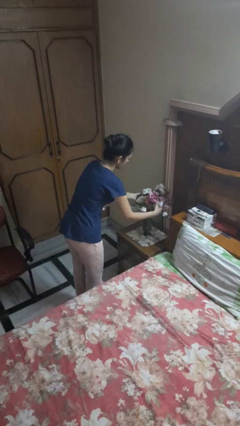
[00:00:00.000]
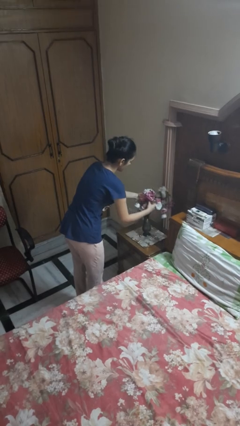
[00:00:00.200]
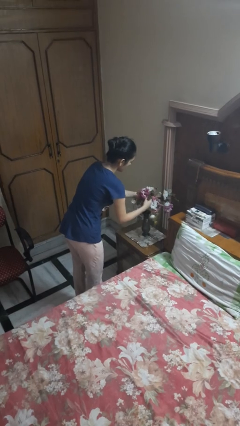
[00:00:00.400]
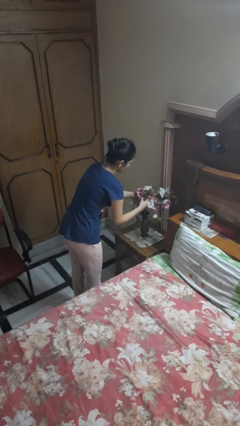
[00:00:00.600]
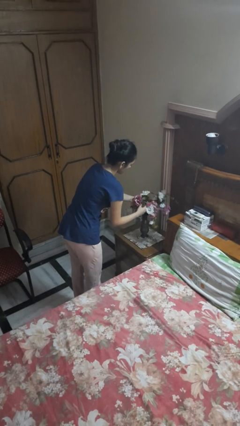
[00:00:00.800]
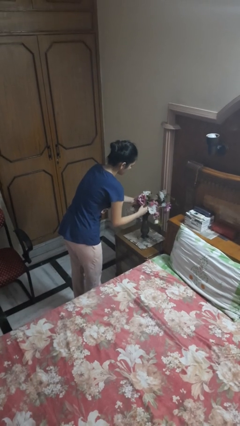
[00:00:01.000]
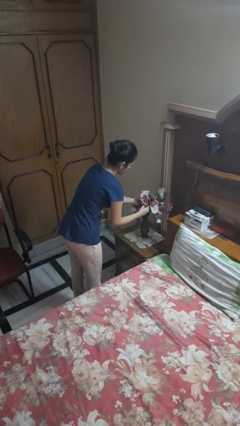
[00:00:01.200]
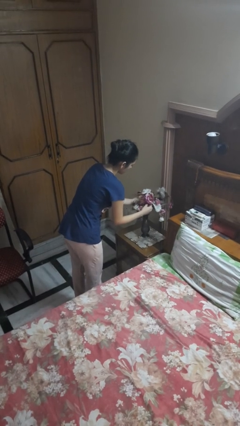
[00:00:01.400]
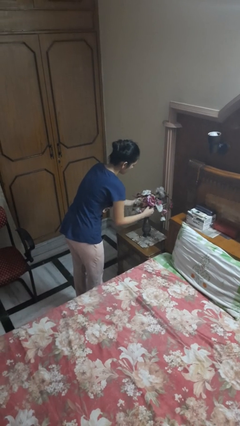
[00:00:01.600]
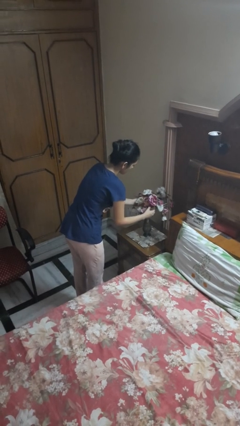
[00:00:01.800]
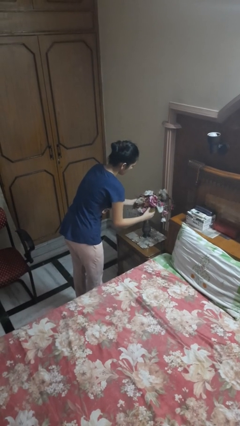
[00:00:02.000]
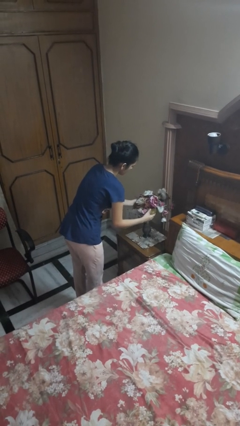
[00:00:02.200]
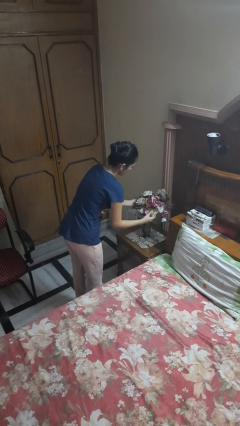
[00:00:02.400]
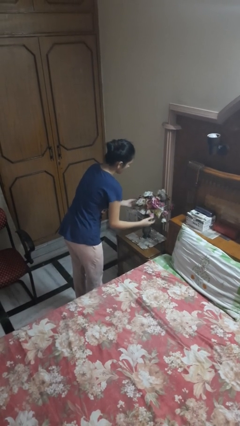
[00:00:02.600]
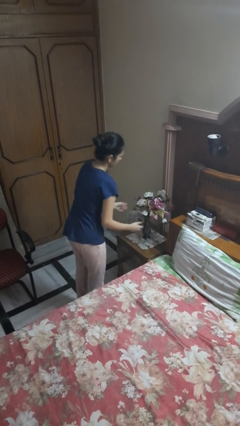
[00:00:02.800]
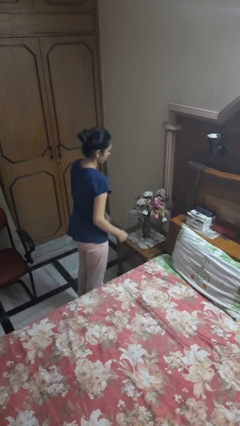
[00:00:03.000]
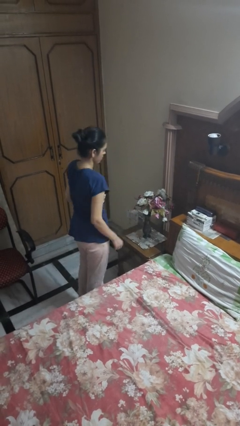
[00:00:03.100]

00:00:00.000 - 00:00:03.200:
person arranges flowers in vase

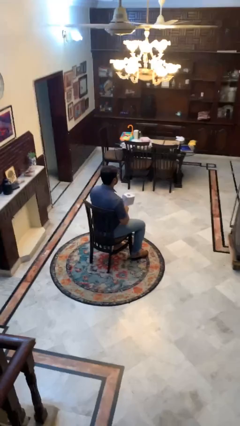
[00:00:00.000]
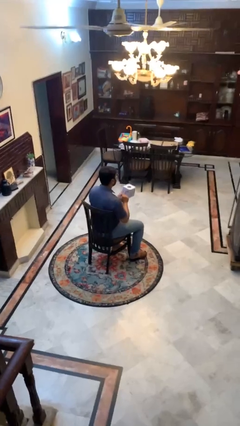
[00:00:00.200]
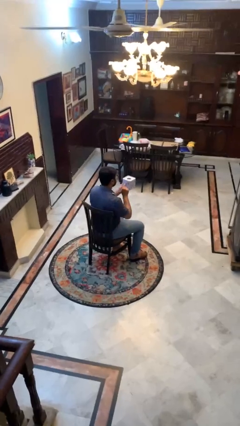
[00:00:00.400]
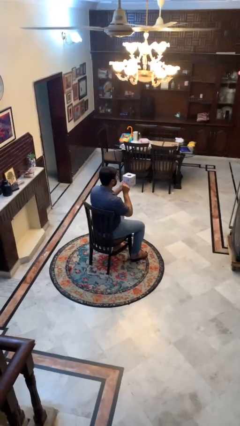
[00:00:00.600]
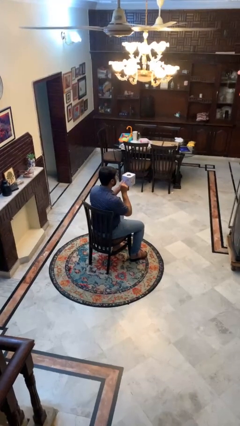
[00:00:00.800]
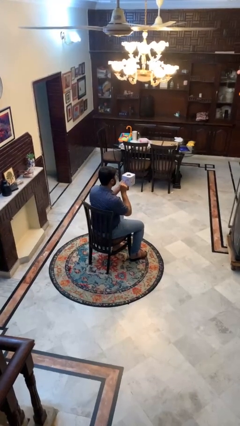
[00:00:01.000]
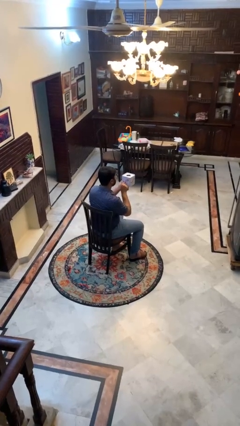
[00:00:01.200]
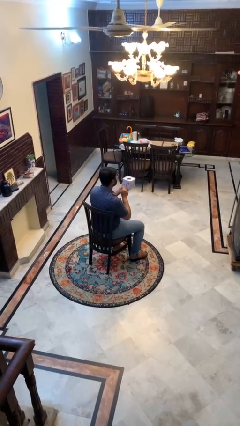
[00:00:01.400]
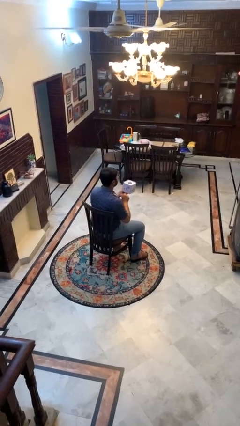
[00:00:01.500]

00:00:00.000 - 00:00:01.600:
person taps object with finger

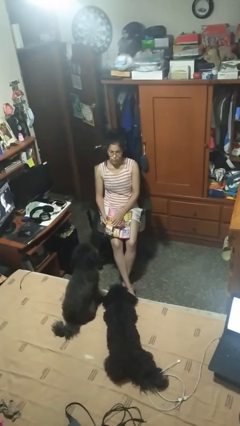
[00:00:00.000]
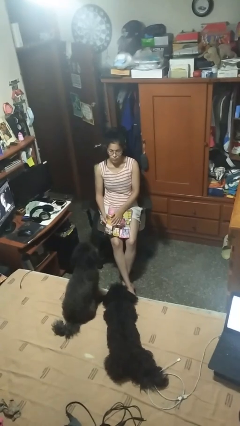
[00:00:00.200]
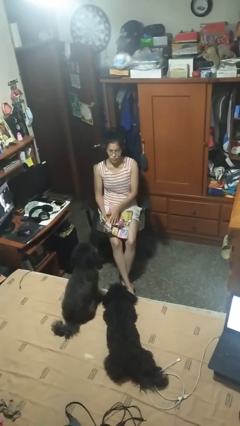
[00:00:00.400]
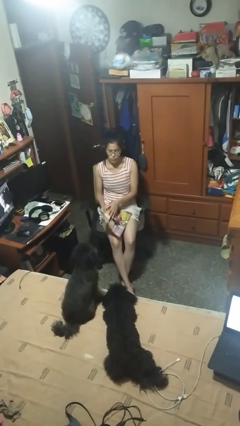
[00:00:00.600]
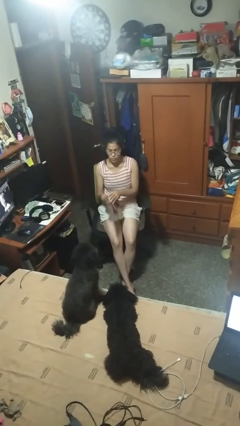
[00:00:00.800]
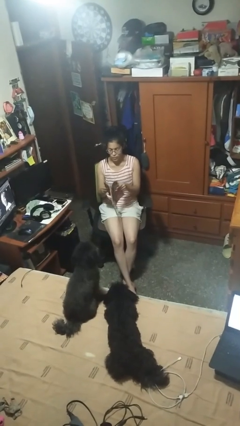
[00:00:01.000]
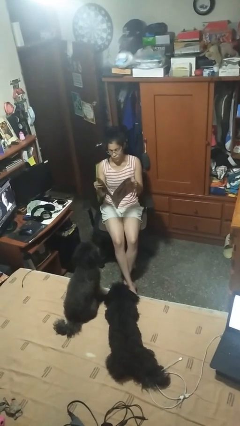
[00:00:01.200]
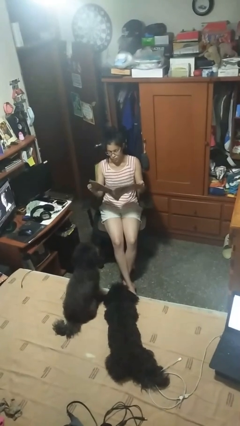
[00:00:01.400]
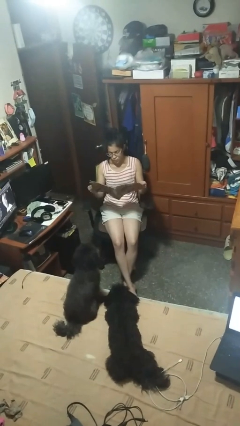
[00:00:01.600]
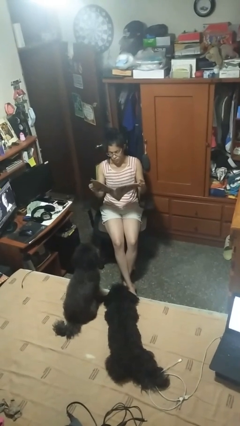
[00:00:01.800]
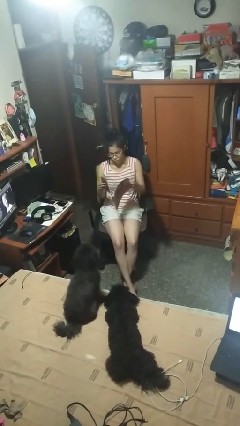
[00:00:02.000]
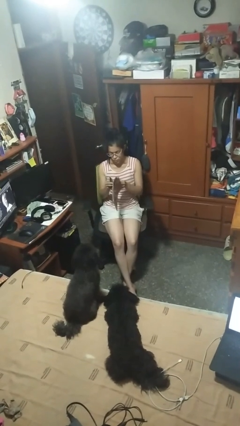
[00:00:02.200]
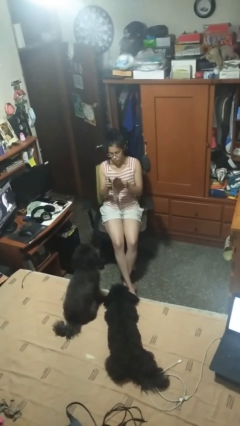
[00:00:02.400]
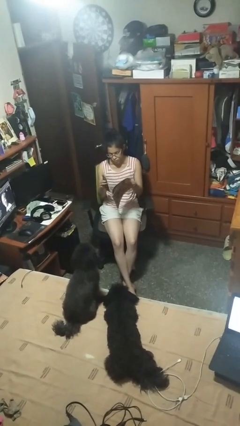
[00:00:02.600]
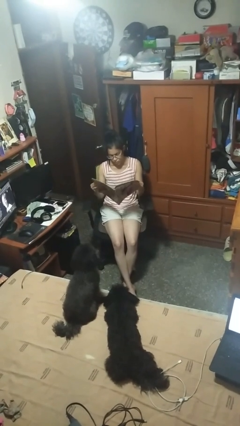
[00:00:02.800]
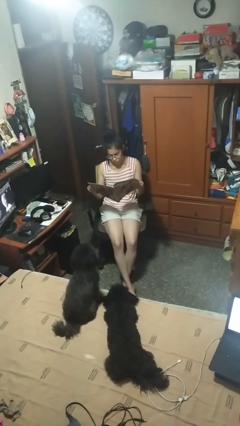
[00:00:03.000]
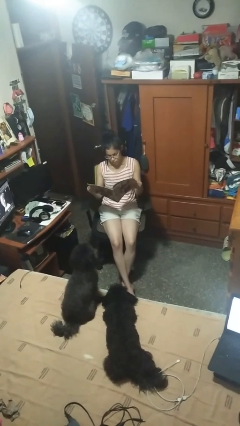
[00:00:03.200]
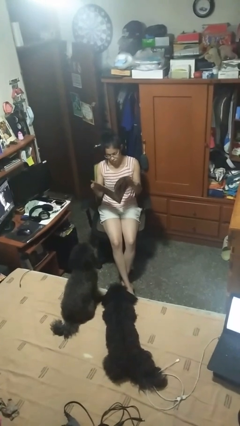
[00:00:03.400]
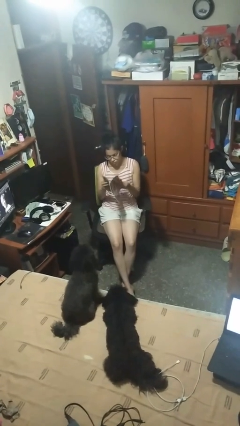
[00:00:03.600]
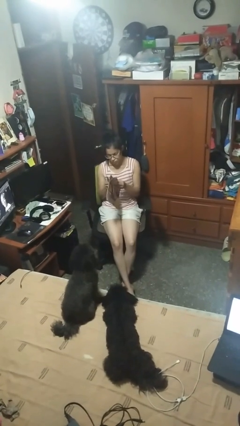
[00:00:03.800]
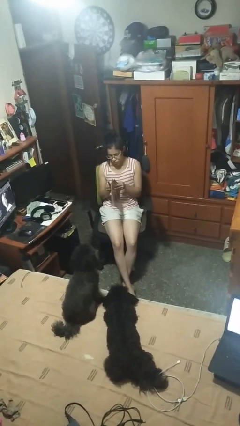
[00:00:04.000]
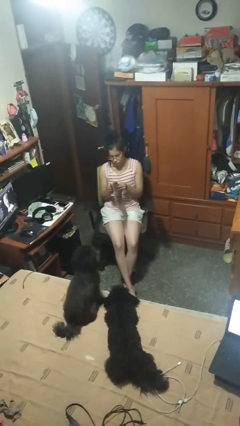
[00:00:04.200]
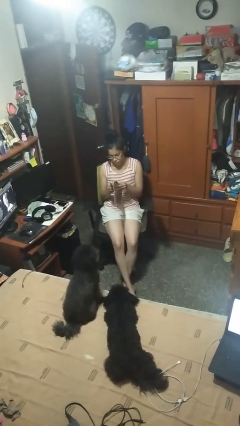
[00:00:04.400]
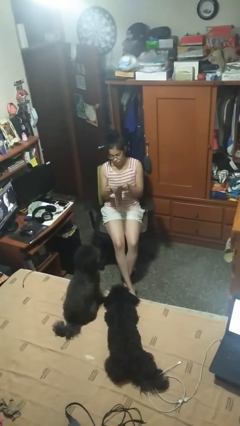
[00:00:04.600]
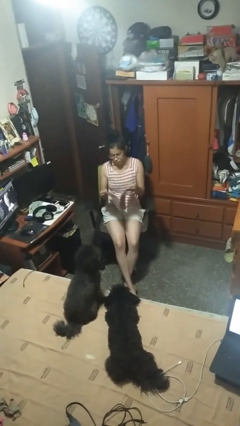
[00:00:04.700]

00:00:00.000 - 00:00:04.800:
person reads magazine

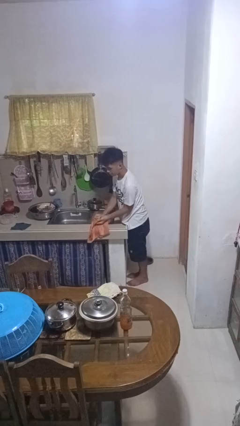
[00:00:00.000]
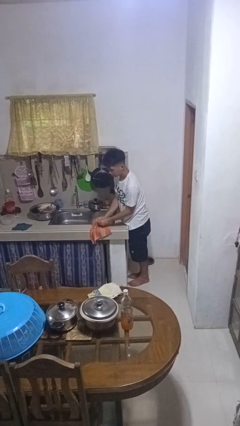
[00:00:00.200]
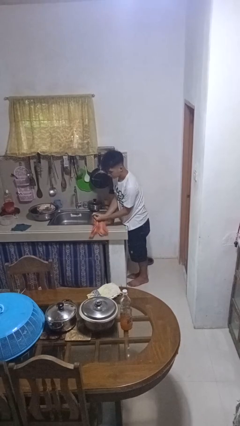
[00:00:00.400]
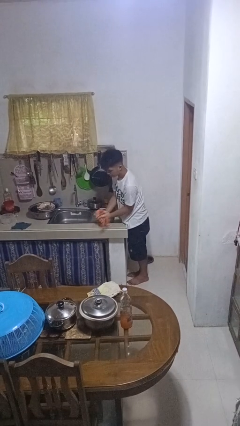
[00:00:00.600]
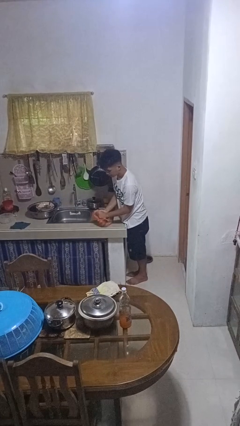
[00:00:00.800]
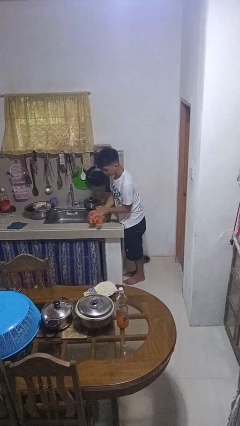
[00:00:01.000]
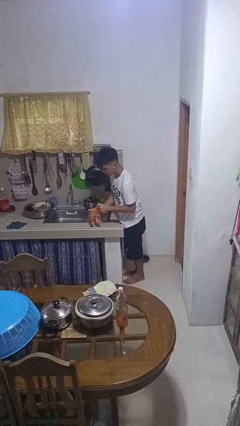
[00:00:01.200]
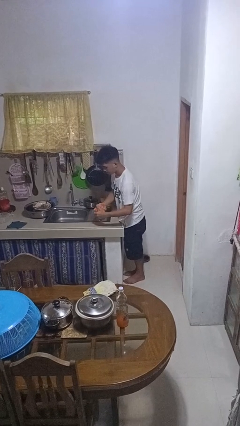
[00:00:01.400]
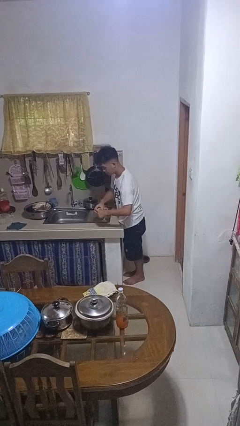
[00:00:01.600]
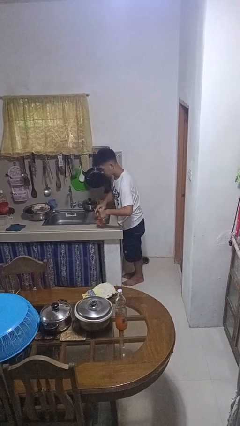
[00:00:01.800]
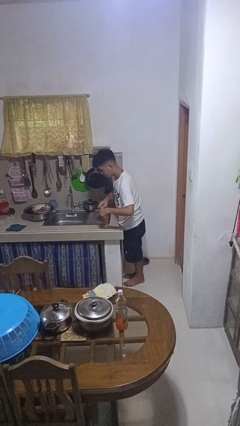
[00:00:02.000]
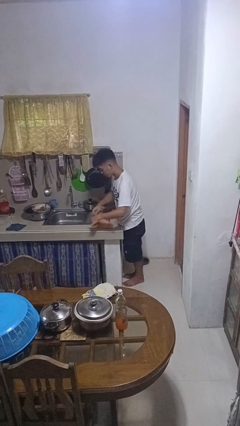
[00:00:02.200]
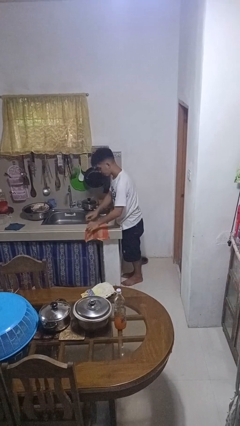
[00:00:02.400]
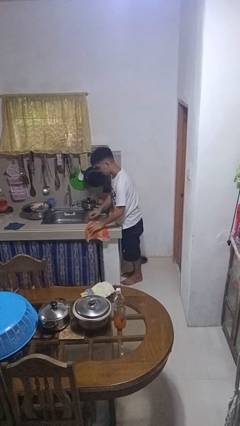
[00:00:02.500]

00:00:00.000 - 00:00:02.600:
person dries hands with towel

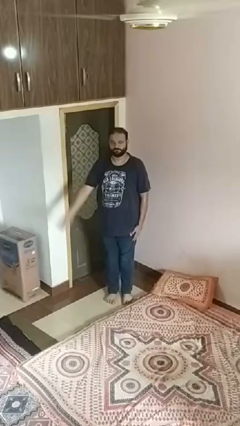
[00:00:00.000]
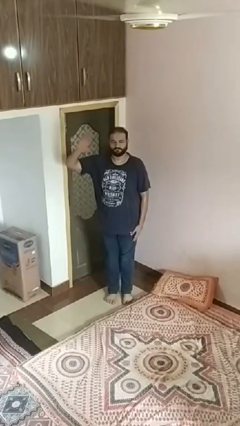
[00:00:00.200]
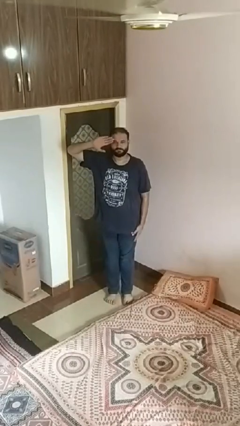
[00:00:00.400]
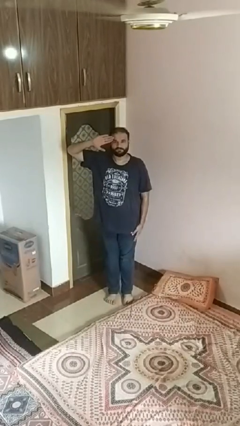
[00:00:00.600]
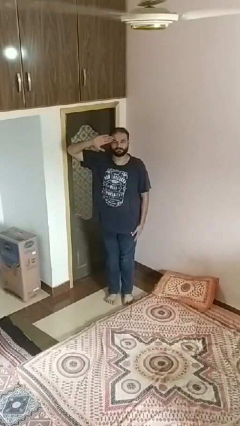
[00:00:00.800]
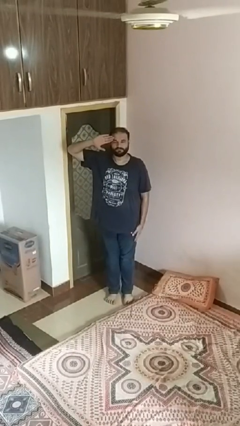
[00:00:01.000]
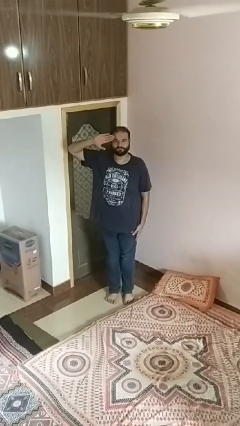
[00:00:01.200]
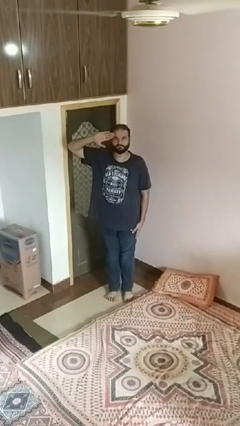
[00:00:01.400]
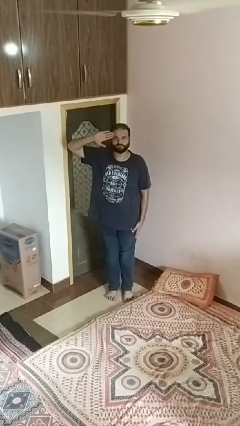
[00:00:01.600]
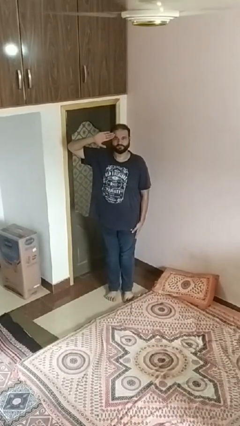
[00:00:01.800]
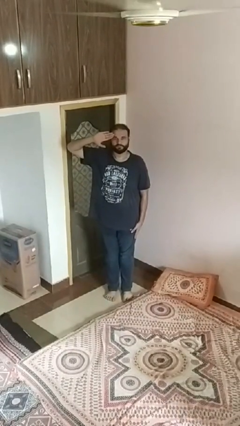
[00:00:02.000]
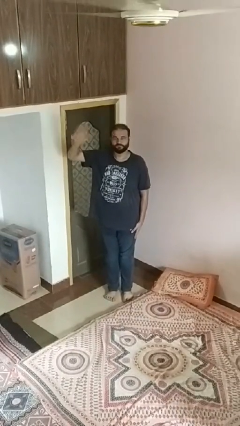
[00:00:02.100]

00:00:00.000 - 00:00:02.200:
person salutes

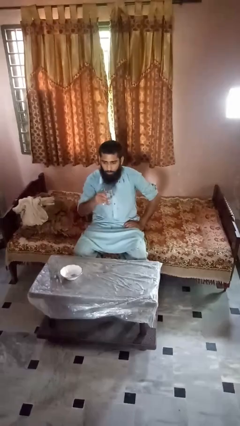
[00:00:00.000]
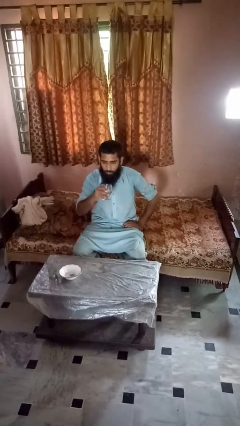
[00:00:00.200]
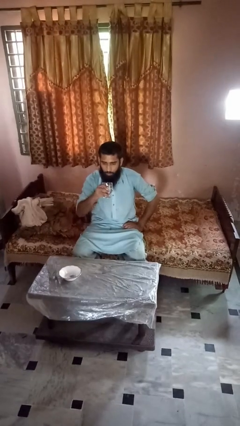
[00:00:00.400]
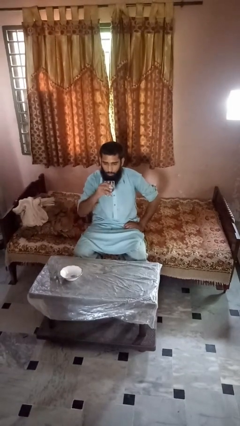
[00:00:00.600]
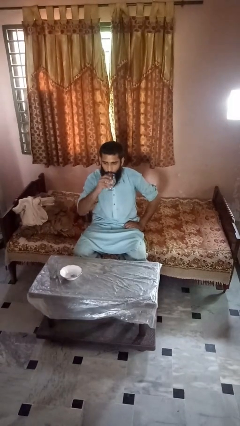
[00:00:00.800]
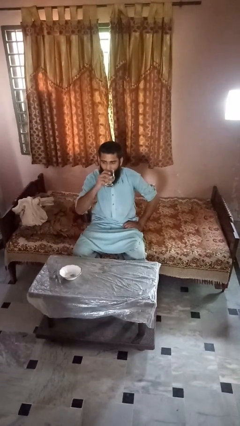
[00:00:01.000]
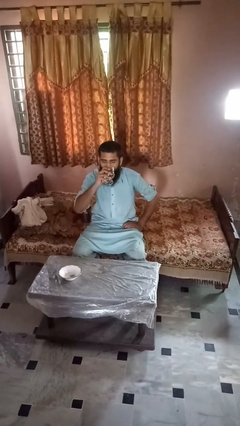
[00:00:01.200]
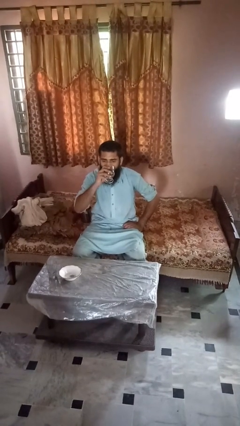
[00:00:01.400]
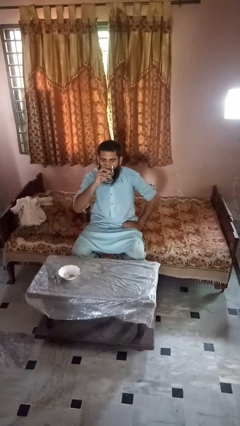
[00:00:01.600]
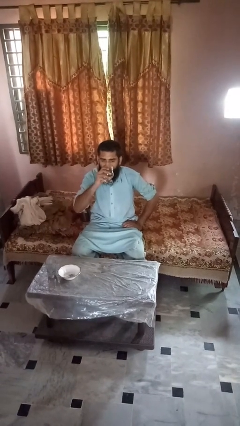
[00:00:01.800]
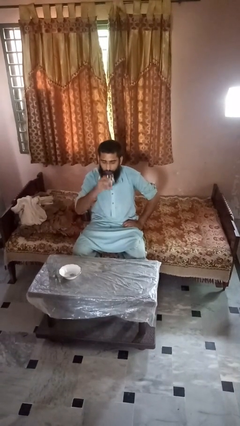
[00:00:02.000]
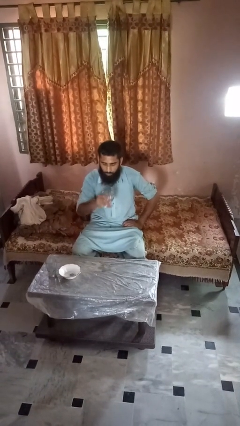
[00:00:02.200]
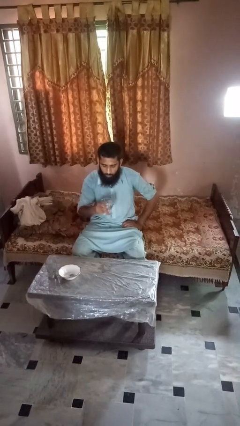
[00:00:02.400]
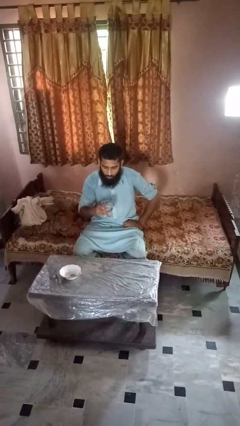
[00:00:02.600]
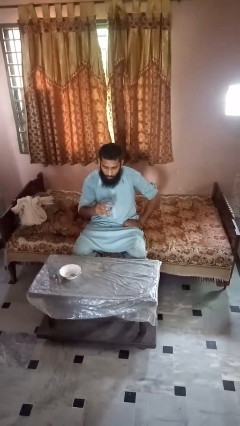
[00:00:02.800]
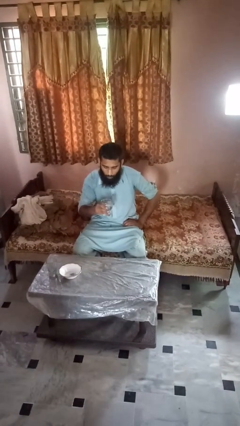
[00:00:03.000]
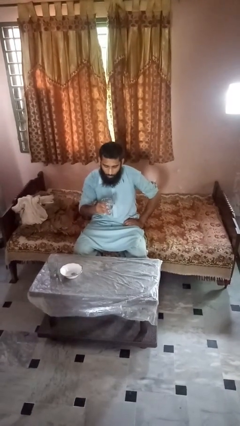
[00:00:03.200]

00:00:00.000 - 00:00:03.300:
person drinks from shotglass
